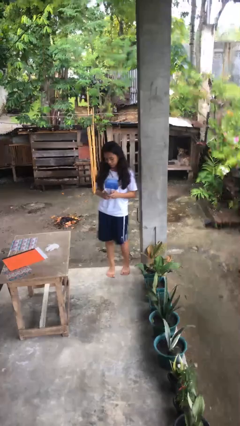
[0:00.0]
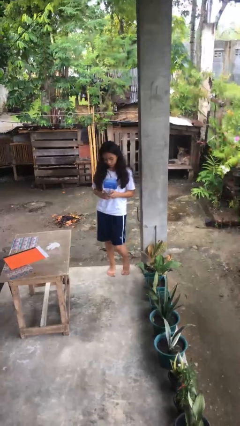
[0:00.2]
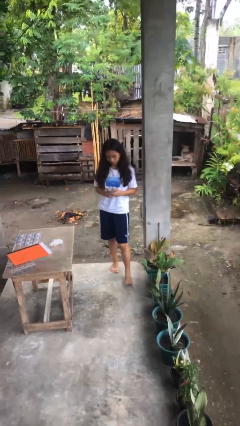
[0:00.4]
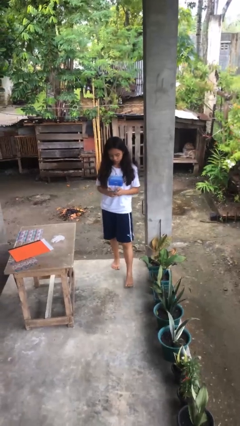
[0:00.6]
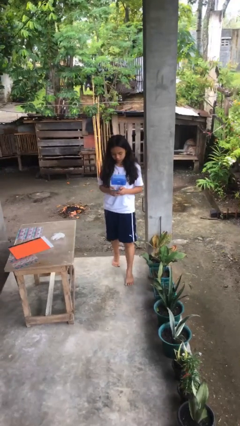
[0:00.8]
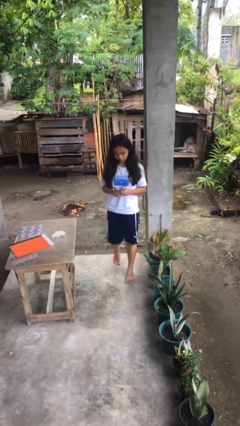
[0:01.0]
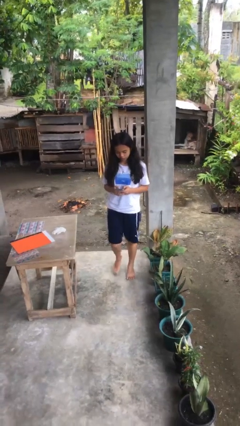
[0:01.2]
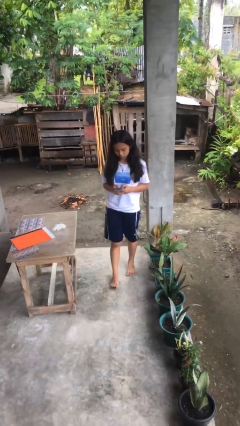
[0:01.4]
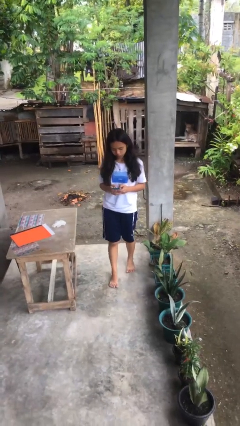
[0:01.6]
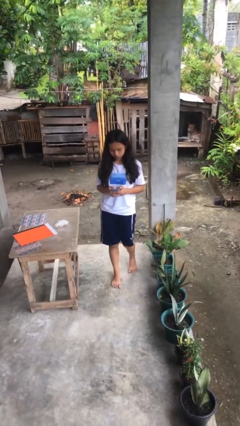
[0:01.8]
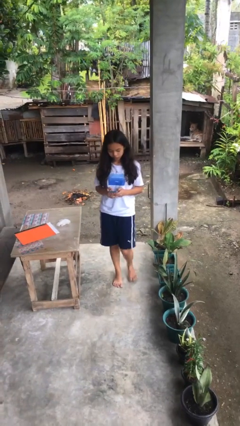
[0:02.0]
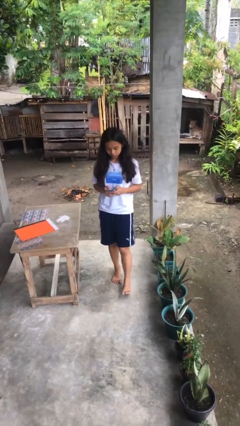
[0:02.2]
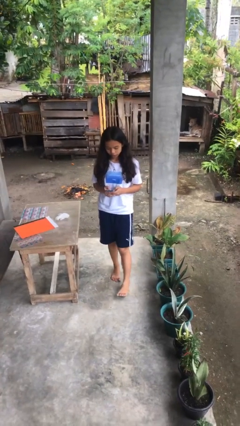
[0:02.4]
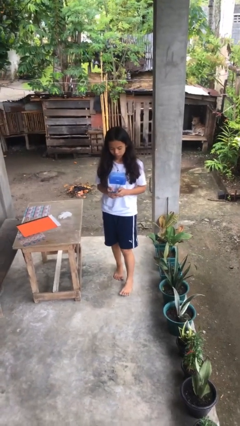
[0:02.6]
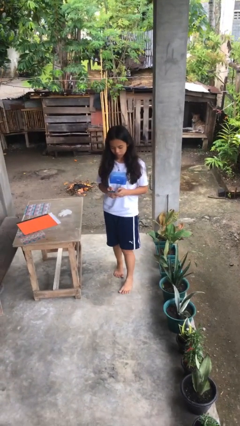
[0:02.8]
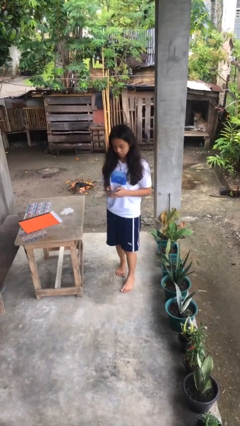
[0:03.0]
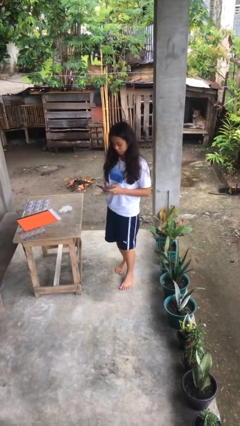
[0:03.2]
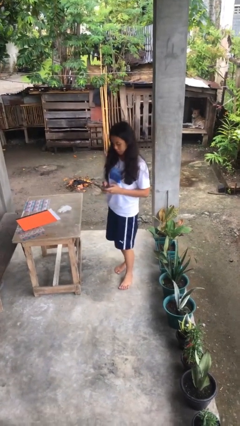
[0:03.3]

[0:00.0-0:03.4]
person texts on phone

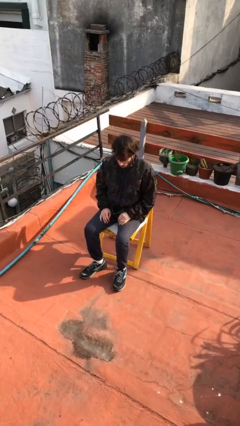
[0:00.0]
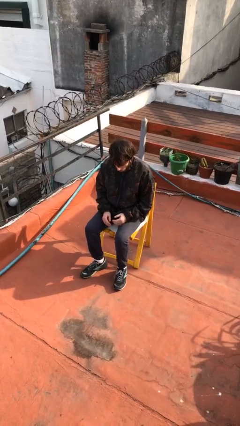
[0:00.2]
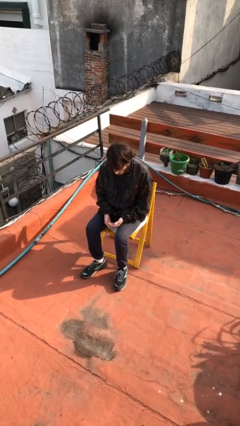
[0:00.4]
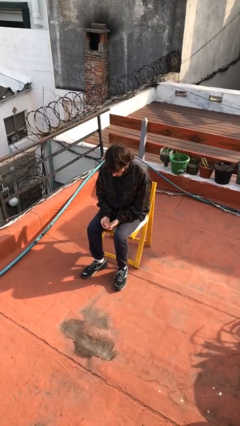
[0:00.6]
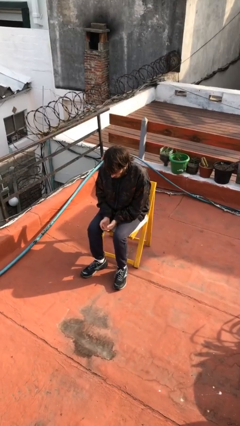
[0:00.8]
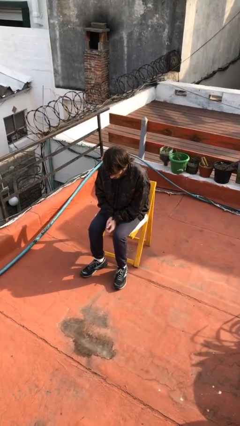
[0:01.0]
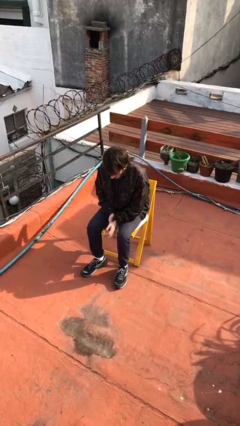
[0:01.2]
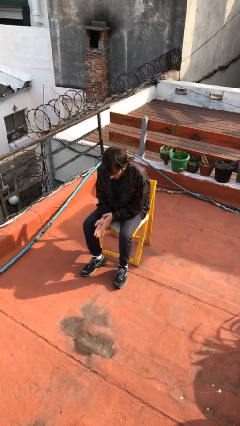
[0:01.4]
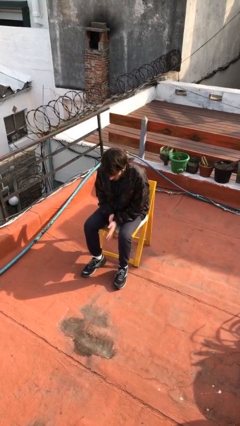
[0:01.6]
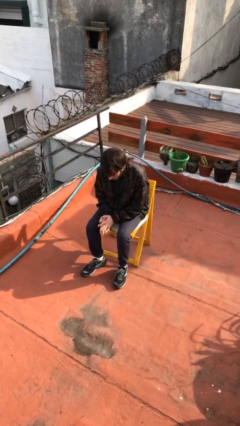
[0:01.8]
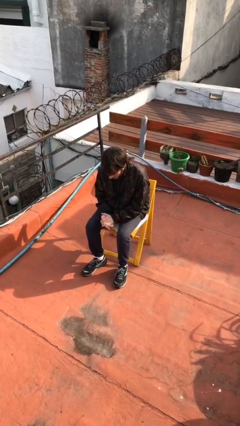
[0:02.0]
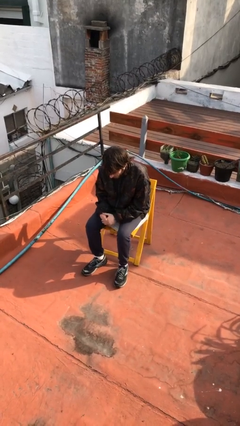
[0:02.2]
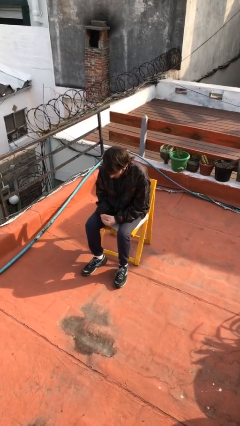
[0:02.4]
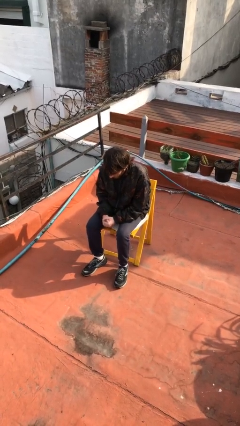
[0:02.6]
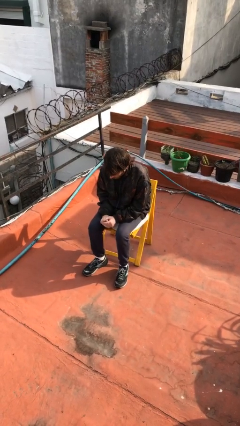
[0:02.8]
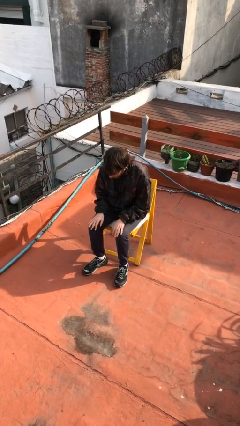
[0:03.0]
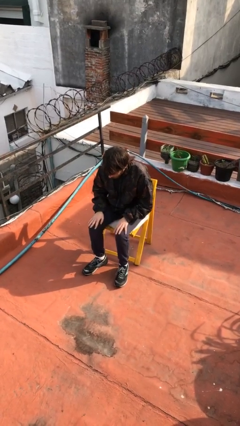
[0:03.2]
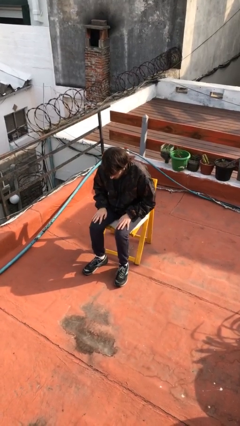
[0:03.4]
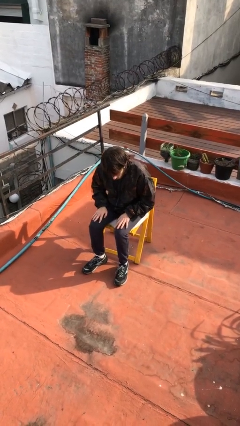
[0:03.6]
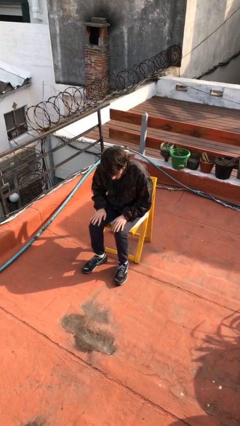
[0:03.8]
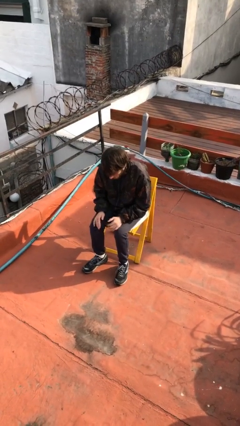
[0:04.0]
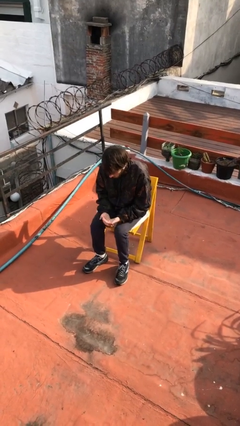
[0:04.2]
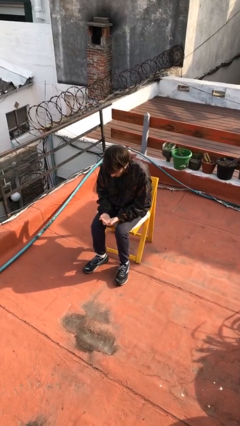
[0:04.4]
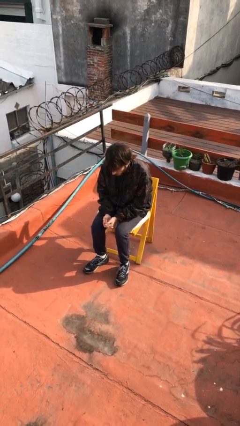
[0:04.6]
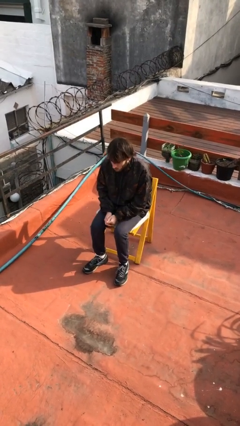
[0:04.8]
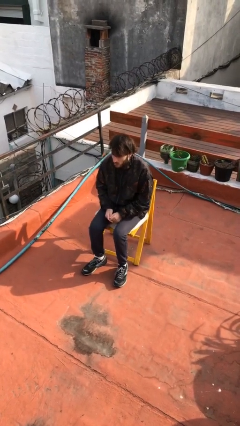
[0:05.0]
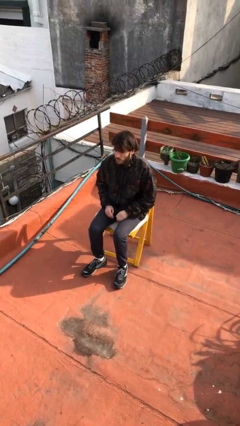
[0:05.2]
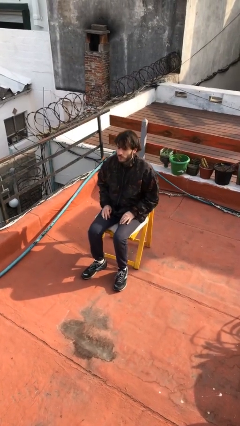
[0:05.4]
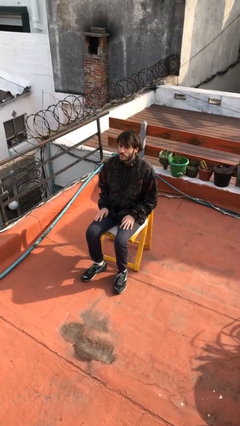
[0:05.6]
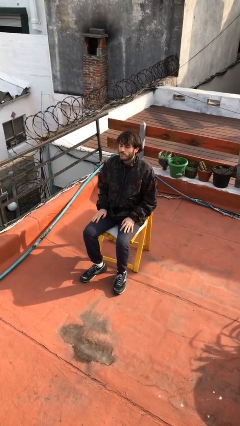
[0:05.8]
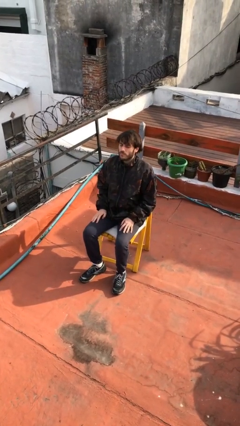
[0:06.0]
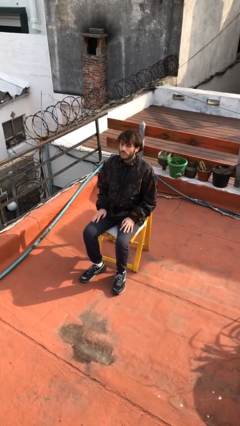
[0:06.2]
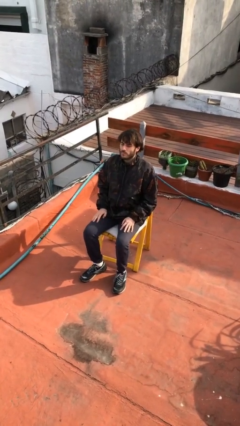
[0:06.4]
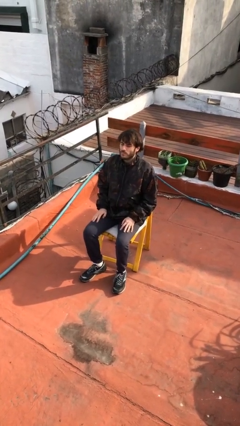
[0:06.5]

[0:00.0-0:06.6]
person looks at hands in lap

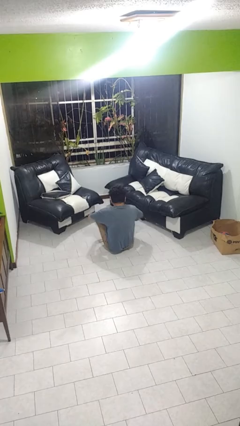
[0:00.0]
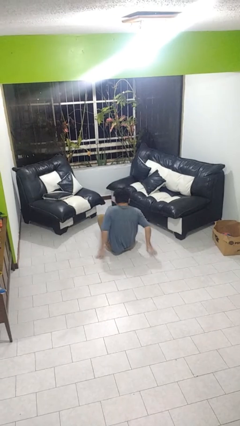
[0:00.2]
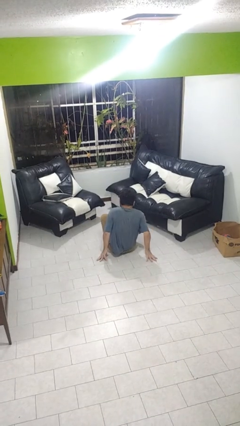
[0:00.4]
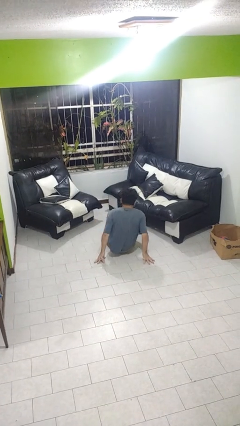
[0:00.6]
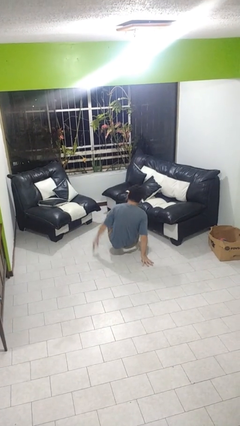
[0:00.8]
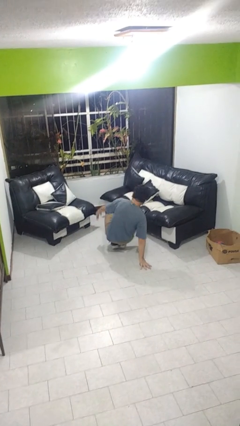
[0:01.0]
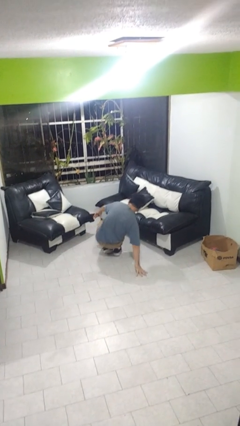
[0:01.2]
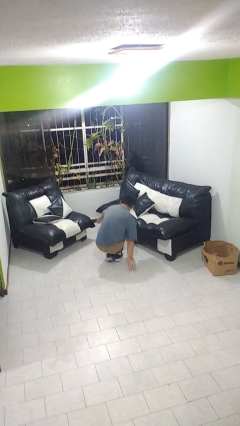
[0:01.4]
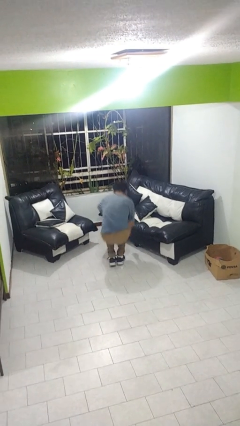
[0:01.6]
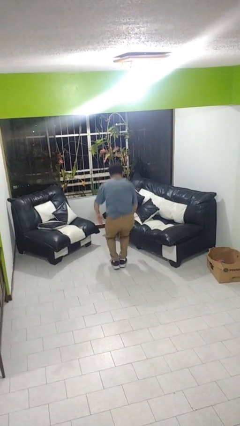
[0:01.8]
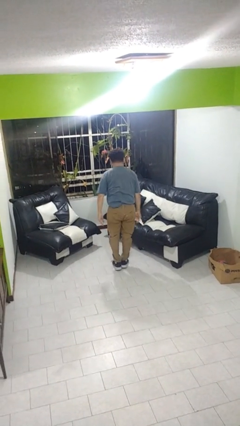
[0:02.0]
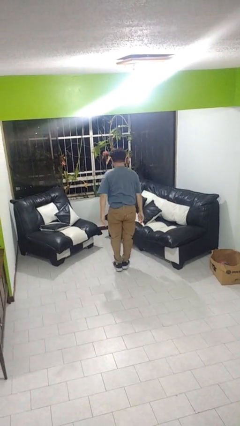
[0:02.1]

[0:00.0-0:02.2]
person stands up from floor

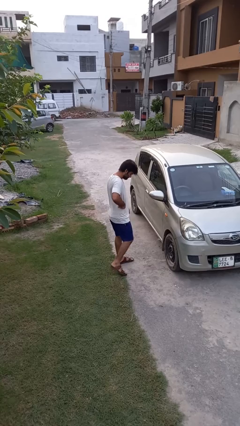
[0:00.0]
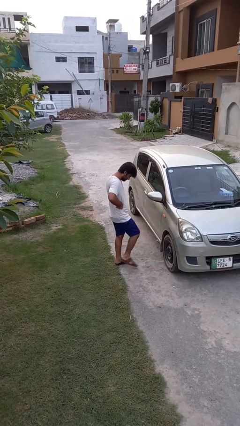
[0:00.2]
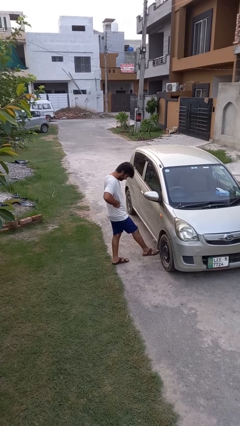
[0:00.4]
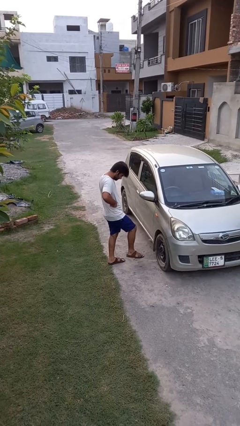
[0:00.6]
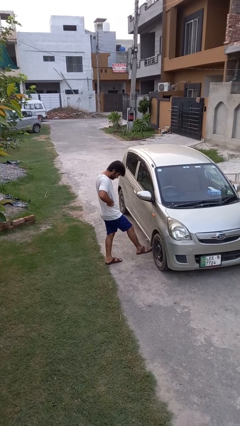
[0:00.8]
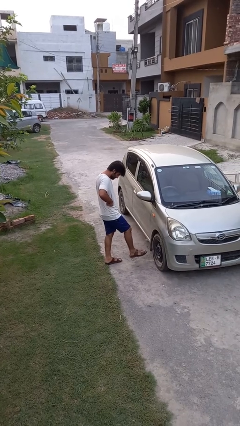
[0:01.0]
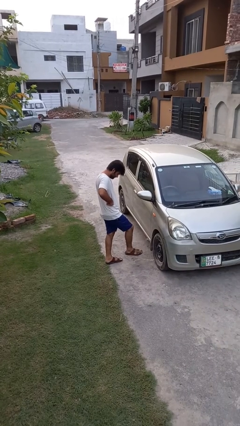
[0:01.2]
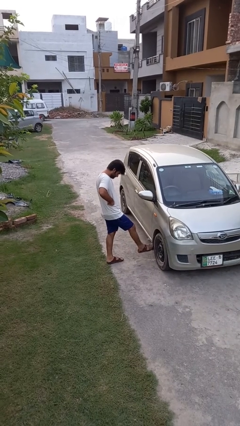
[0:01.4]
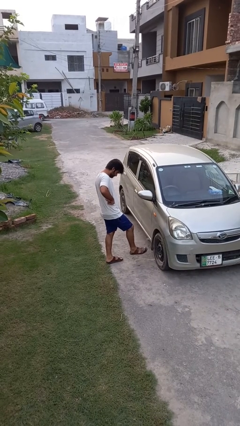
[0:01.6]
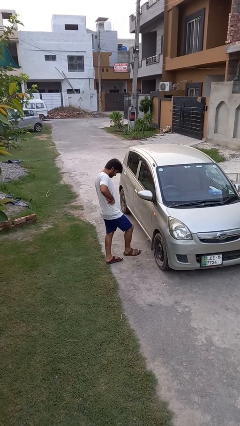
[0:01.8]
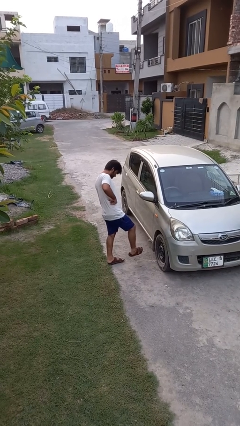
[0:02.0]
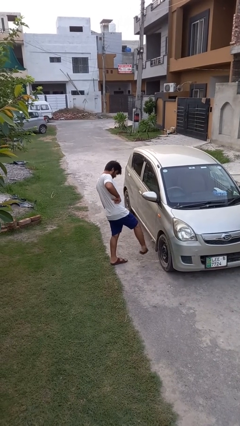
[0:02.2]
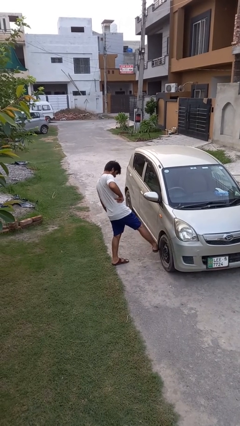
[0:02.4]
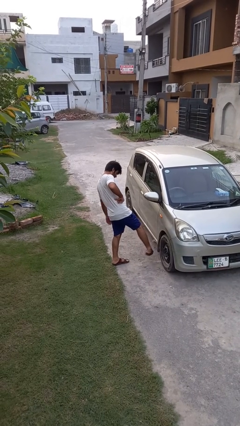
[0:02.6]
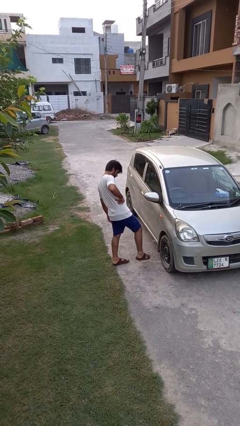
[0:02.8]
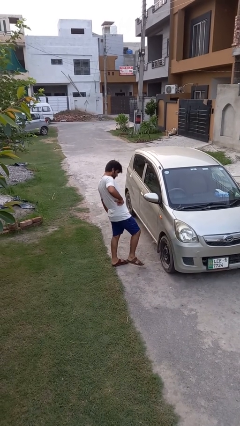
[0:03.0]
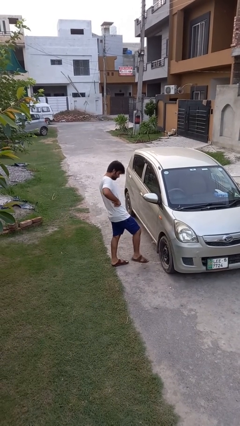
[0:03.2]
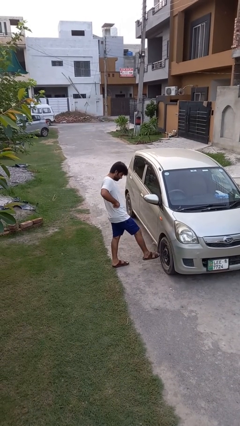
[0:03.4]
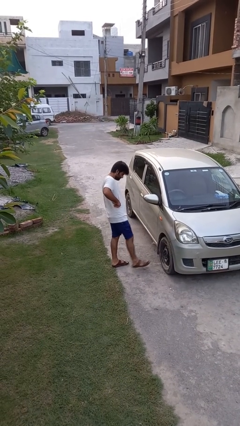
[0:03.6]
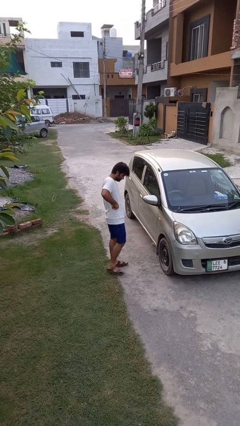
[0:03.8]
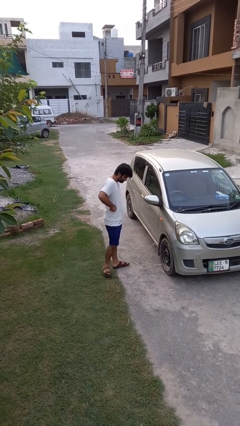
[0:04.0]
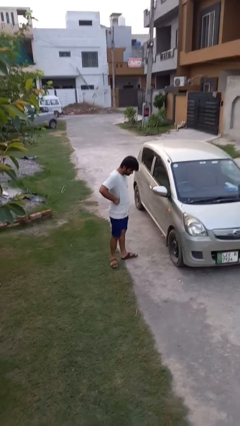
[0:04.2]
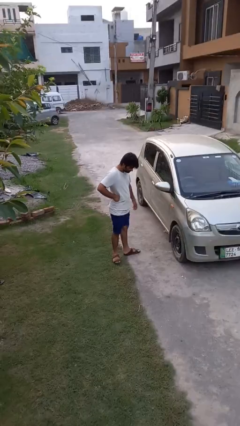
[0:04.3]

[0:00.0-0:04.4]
person kicks car tires

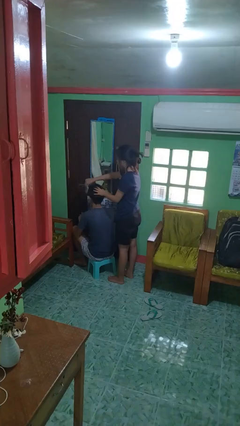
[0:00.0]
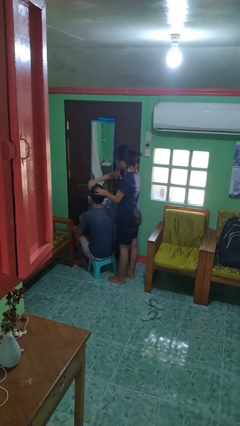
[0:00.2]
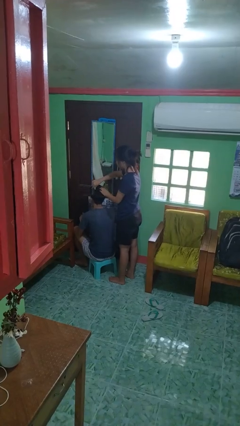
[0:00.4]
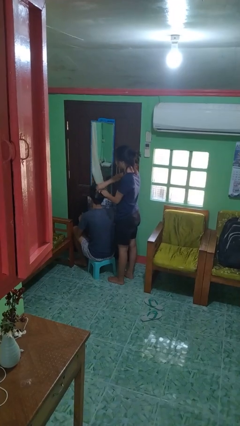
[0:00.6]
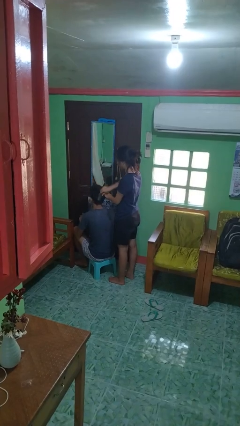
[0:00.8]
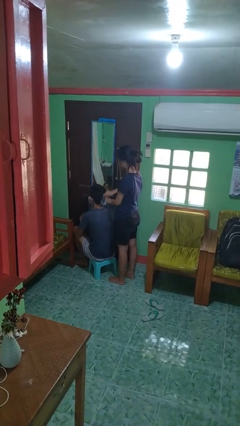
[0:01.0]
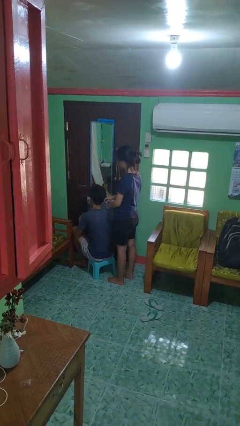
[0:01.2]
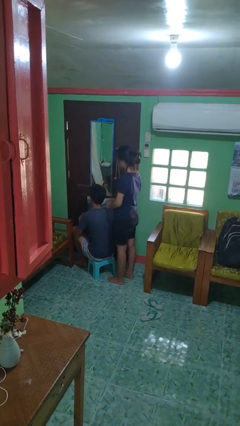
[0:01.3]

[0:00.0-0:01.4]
person brushes hair of person
